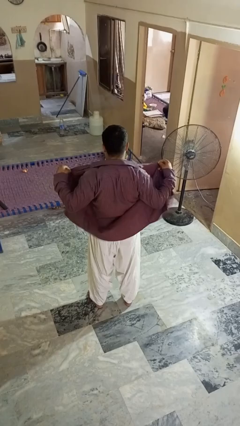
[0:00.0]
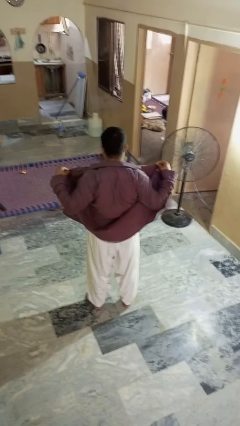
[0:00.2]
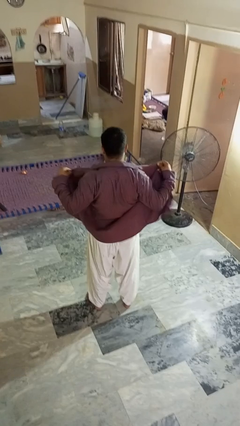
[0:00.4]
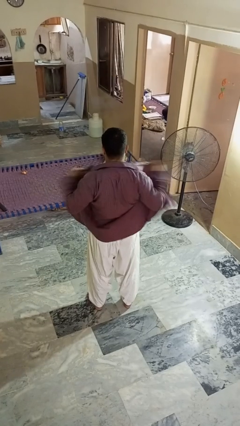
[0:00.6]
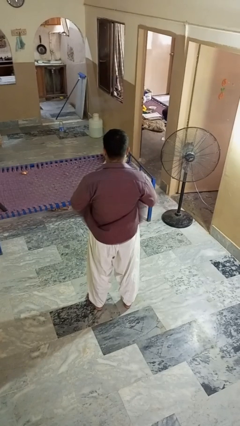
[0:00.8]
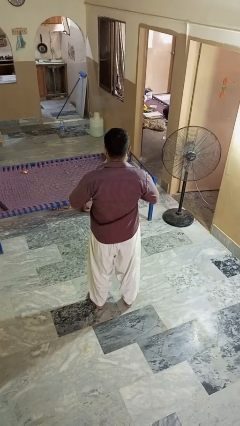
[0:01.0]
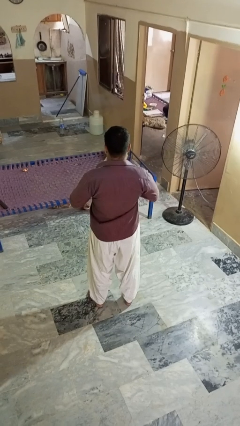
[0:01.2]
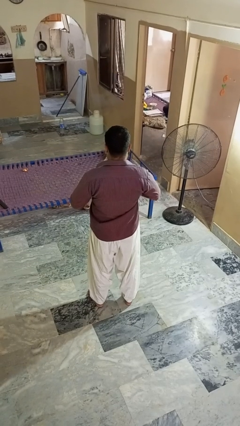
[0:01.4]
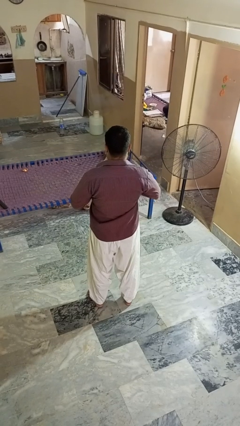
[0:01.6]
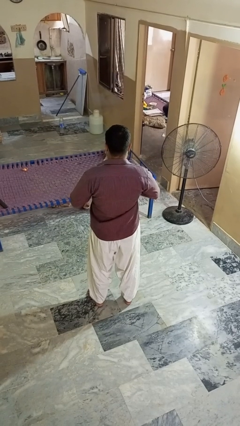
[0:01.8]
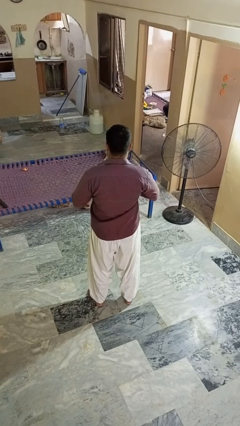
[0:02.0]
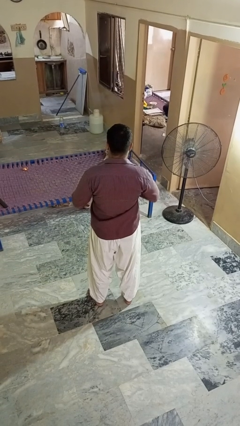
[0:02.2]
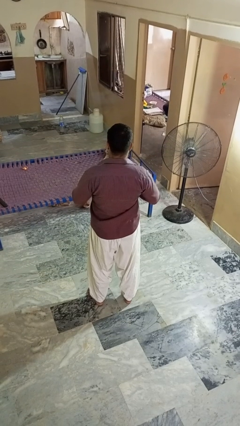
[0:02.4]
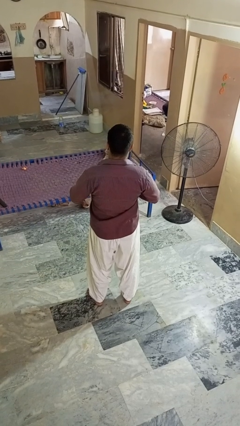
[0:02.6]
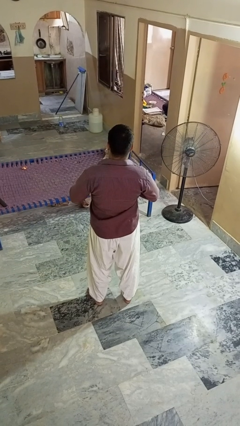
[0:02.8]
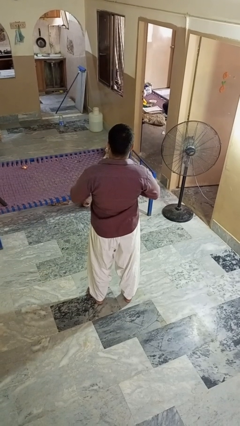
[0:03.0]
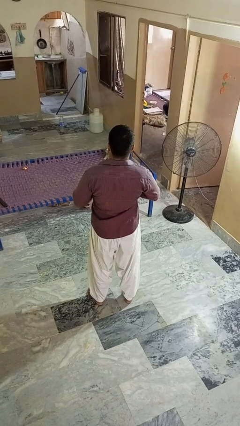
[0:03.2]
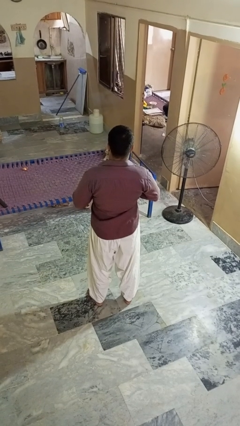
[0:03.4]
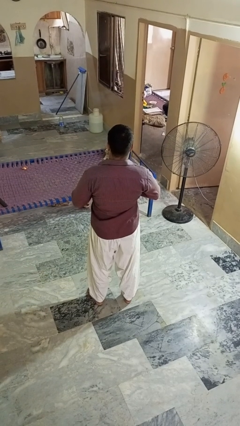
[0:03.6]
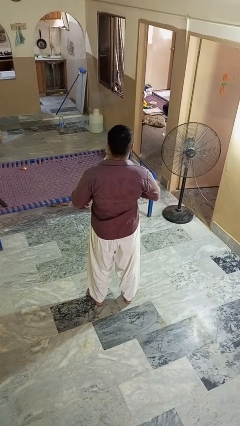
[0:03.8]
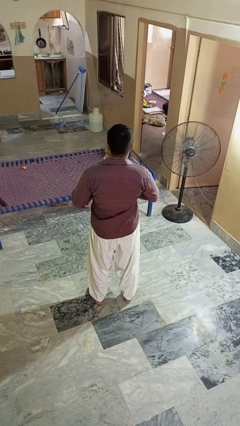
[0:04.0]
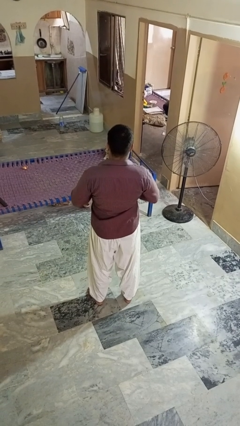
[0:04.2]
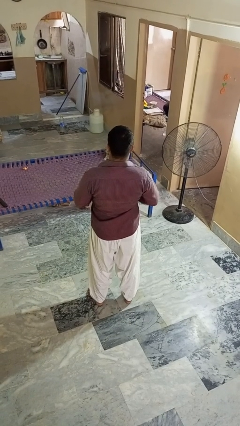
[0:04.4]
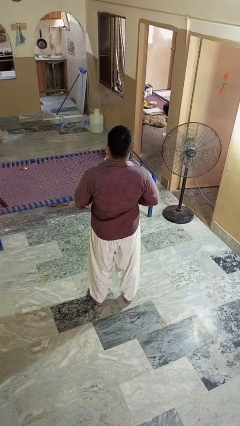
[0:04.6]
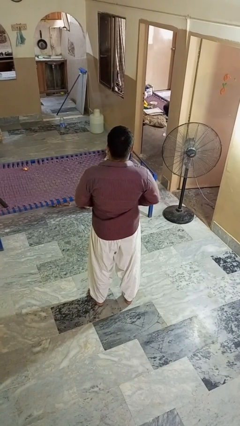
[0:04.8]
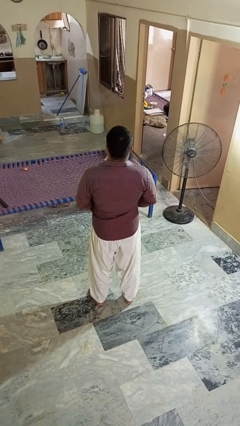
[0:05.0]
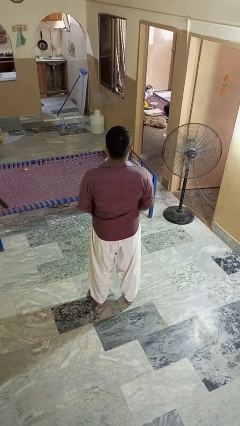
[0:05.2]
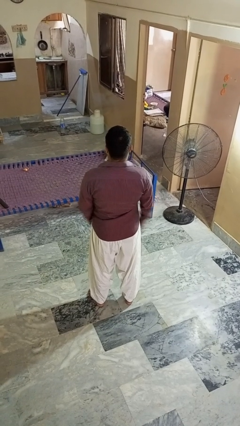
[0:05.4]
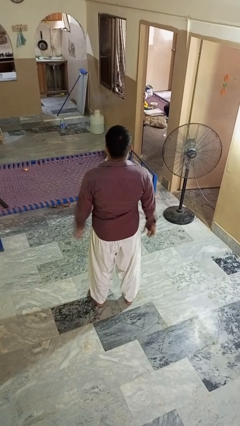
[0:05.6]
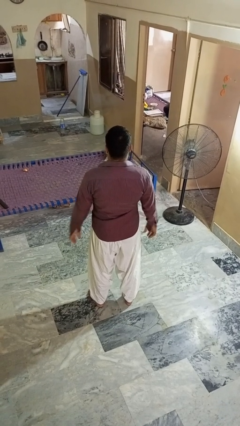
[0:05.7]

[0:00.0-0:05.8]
person buttons shirt

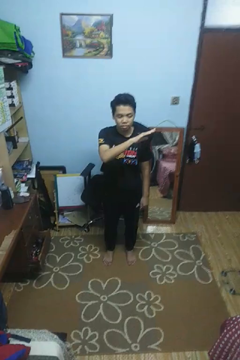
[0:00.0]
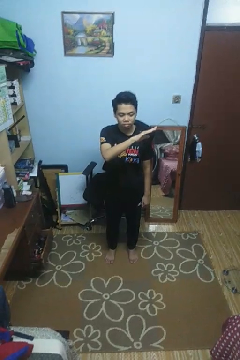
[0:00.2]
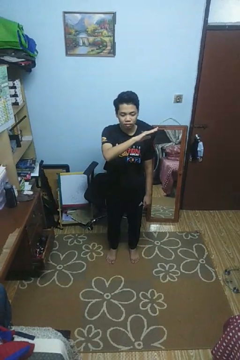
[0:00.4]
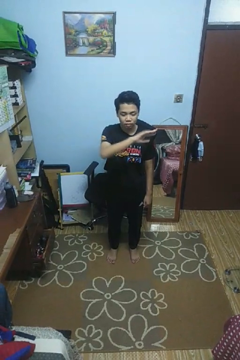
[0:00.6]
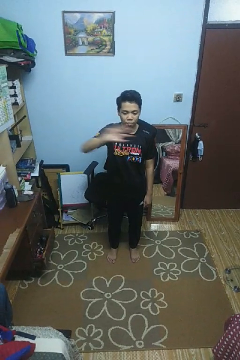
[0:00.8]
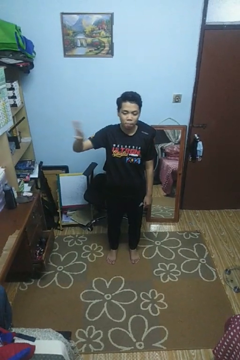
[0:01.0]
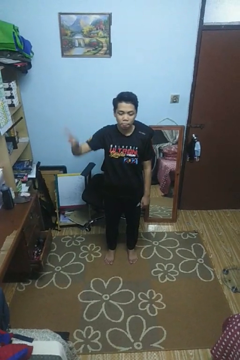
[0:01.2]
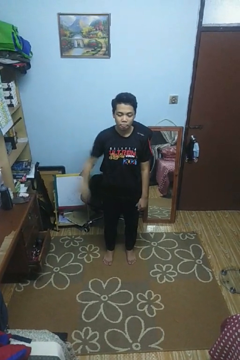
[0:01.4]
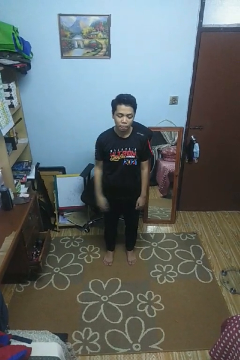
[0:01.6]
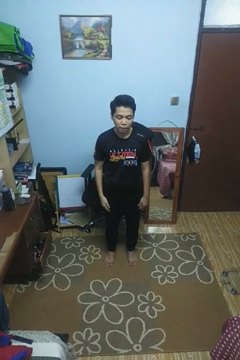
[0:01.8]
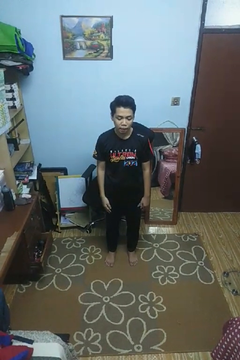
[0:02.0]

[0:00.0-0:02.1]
person gestures swipe right

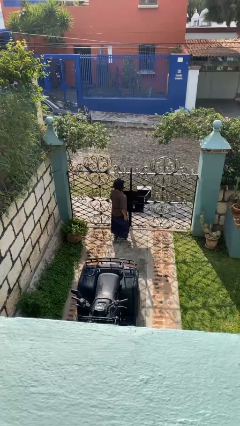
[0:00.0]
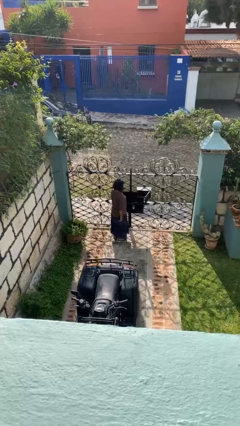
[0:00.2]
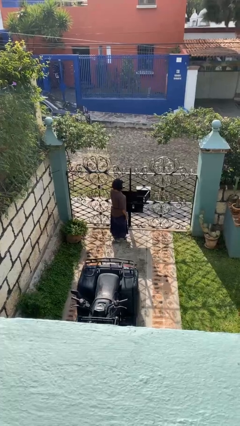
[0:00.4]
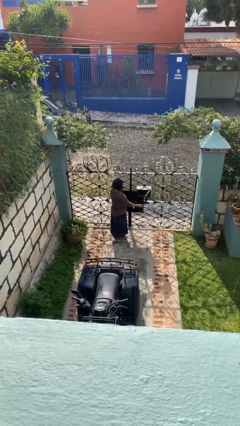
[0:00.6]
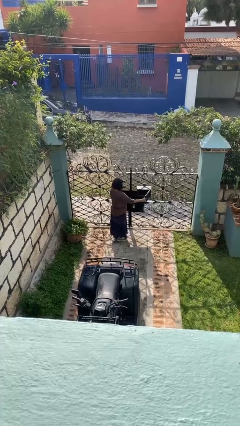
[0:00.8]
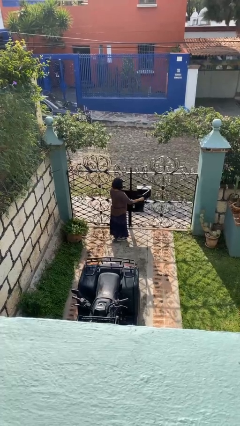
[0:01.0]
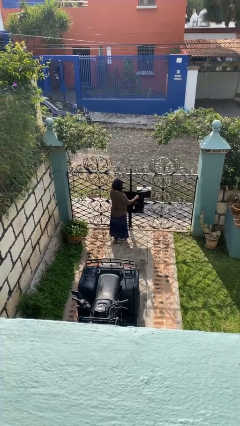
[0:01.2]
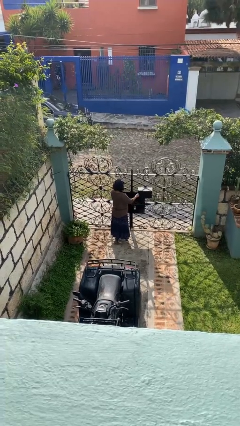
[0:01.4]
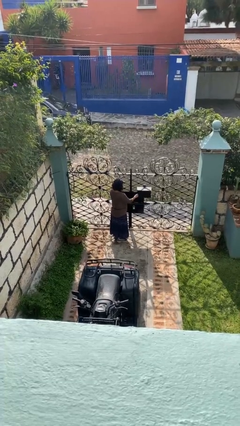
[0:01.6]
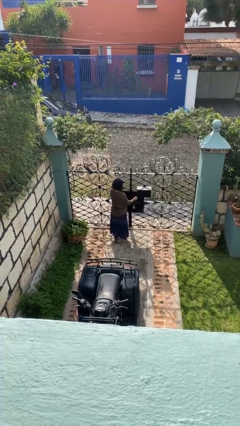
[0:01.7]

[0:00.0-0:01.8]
person closes mailbox

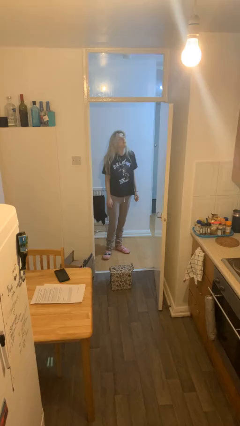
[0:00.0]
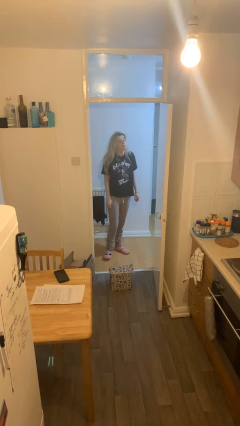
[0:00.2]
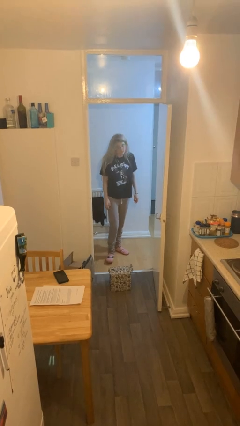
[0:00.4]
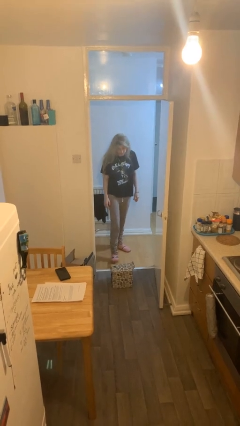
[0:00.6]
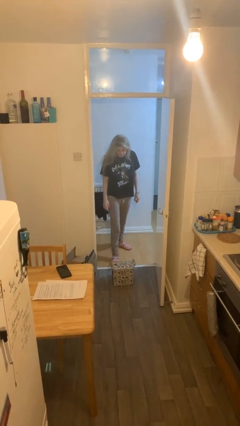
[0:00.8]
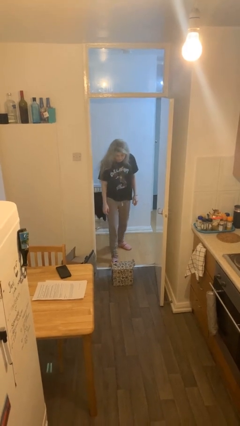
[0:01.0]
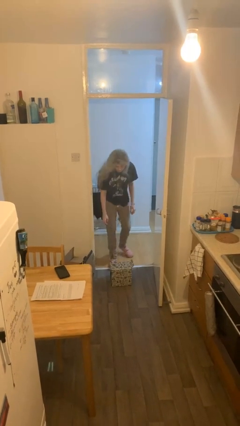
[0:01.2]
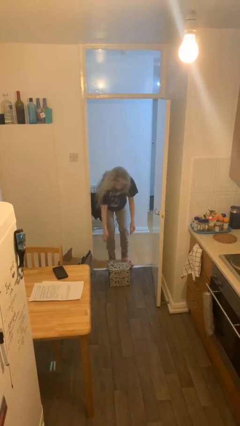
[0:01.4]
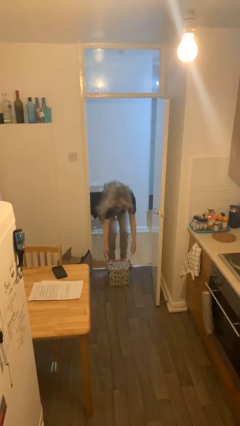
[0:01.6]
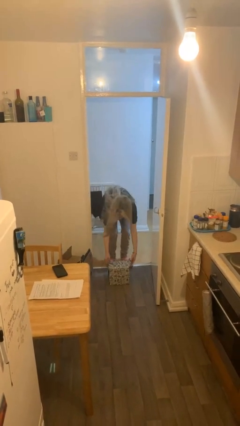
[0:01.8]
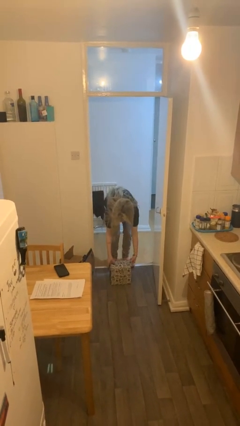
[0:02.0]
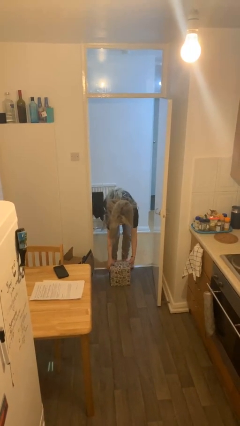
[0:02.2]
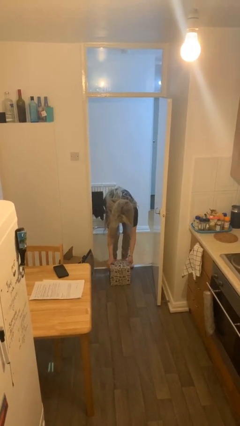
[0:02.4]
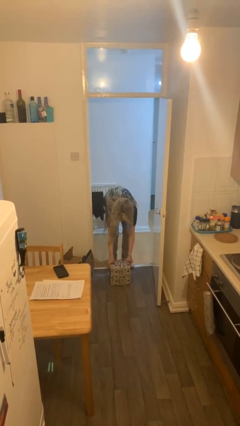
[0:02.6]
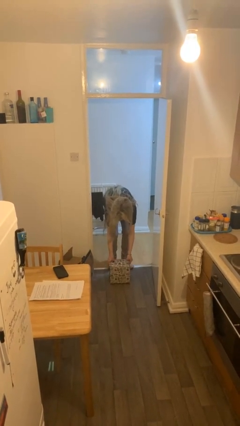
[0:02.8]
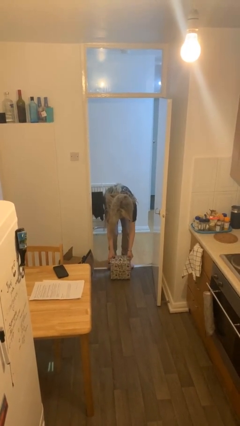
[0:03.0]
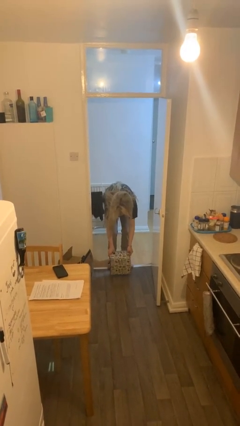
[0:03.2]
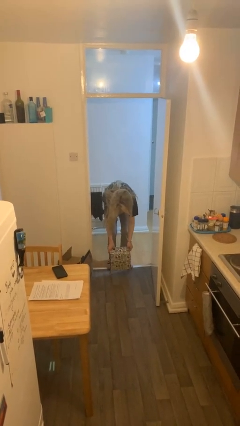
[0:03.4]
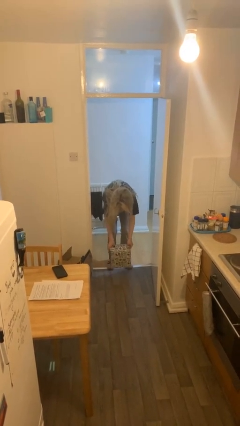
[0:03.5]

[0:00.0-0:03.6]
person picks up object from floor

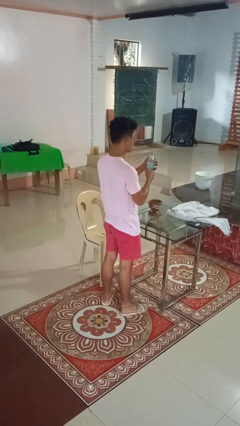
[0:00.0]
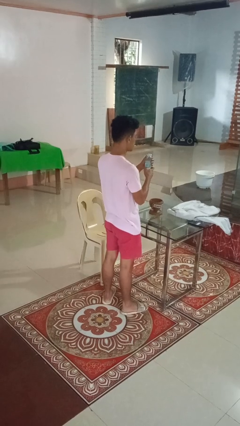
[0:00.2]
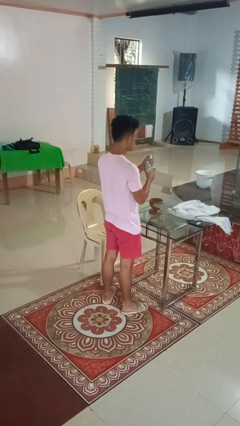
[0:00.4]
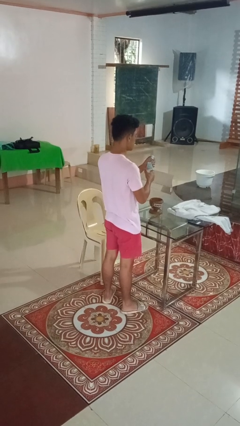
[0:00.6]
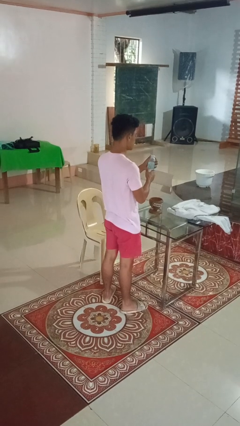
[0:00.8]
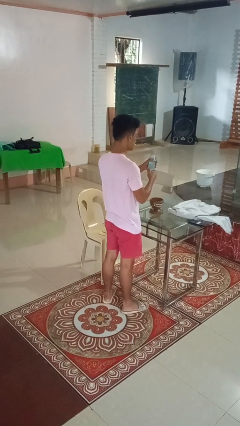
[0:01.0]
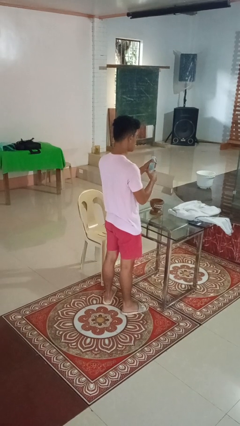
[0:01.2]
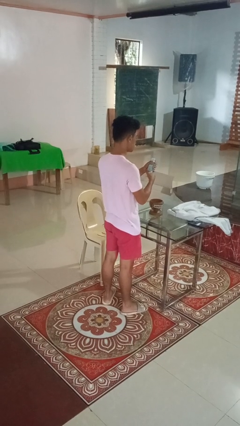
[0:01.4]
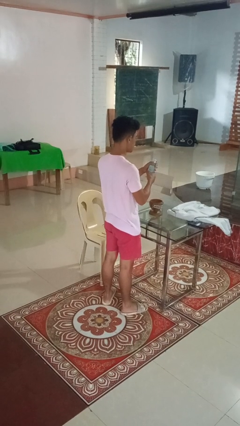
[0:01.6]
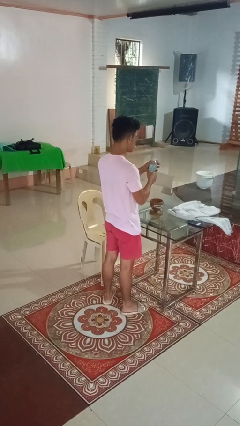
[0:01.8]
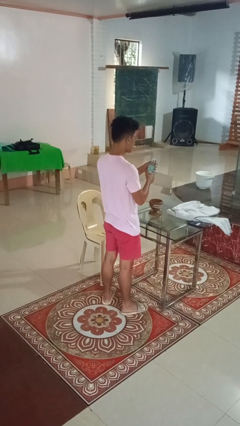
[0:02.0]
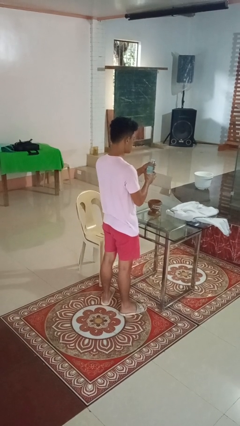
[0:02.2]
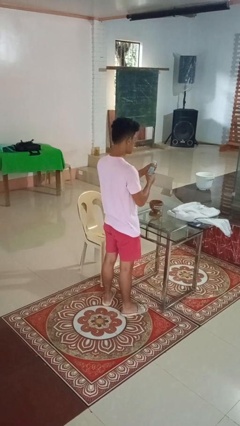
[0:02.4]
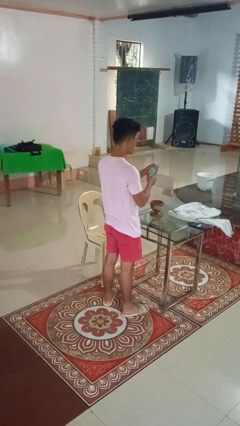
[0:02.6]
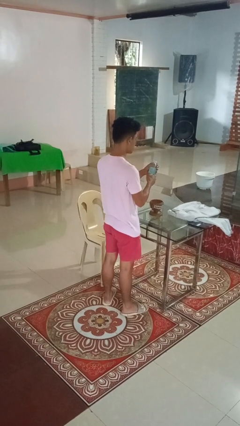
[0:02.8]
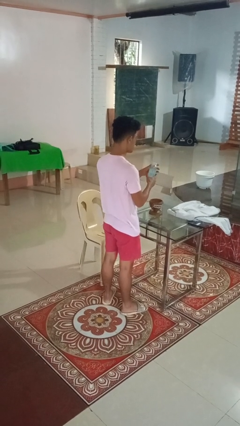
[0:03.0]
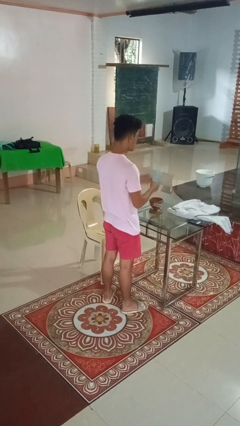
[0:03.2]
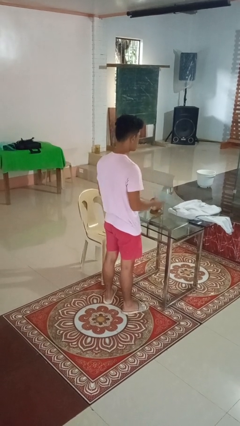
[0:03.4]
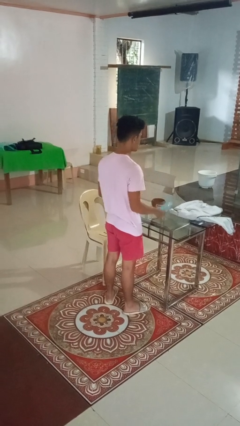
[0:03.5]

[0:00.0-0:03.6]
person squeezes object

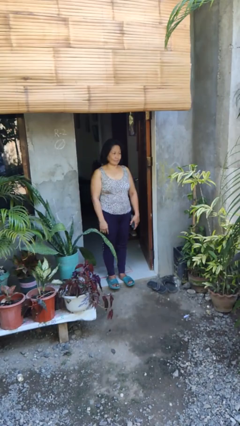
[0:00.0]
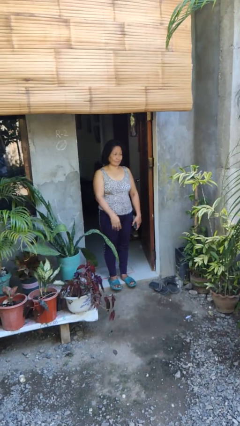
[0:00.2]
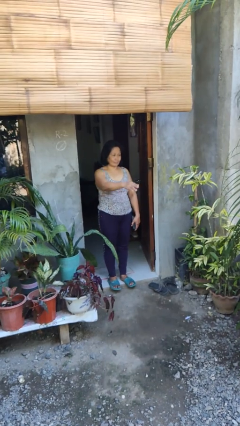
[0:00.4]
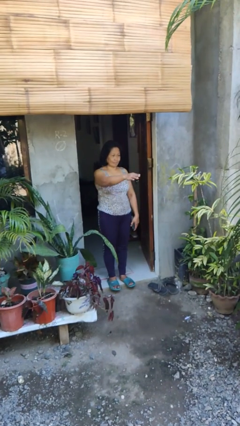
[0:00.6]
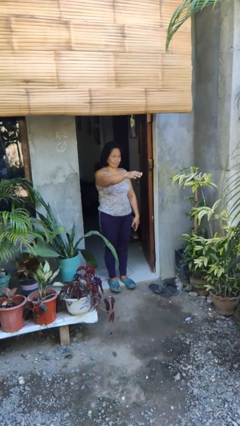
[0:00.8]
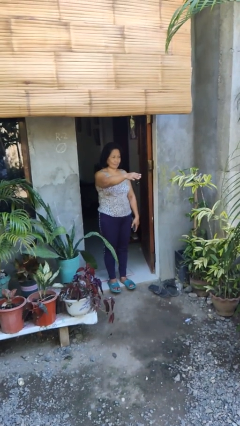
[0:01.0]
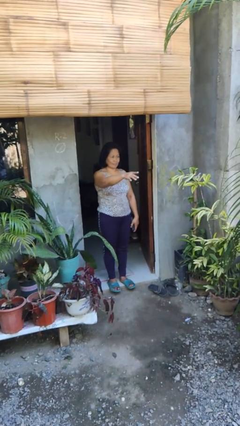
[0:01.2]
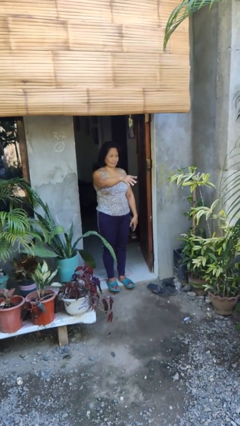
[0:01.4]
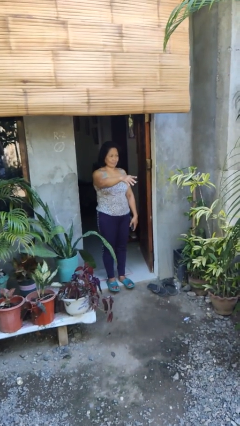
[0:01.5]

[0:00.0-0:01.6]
person points at person
